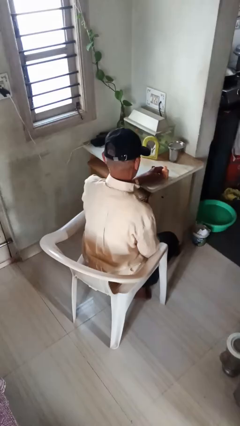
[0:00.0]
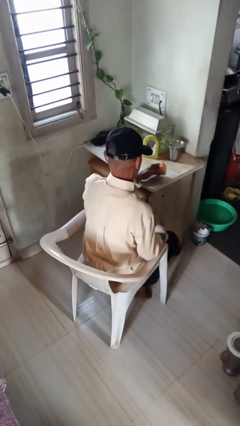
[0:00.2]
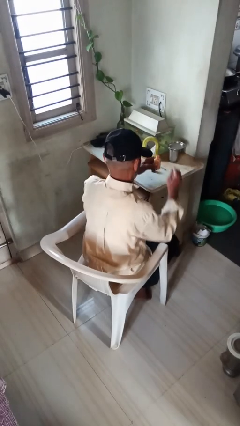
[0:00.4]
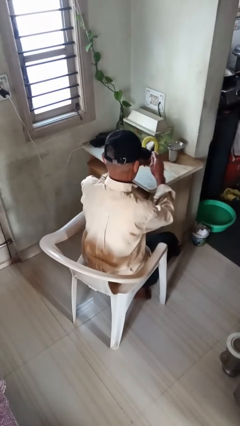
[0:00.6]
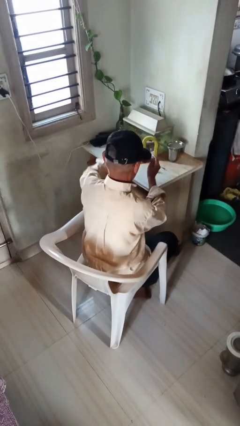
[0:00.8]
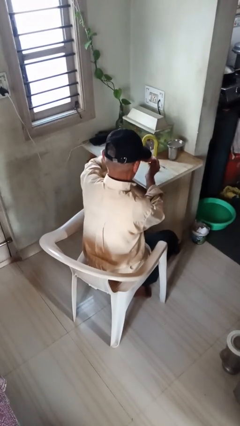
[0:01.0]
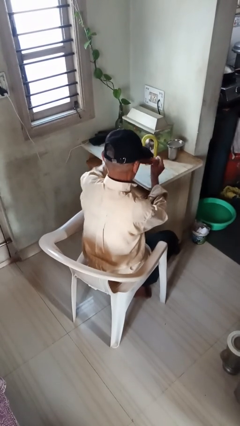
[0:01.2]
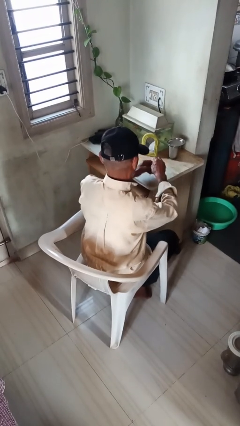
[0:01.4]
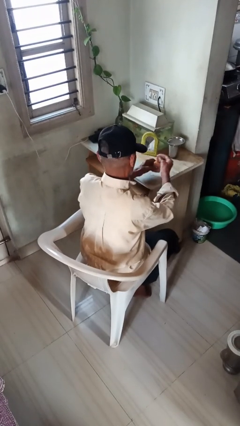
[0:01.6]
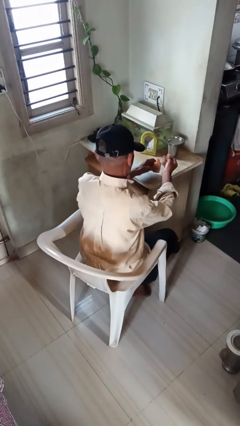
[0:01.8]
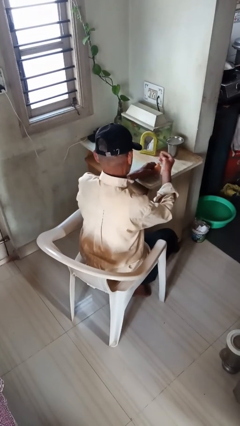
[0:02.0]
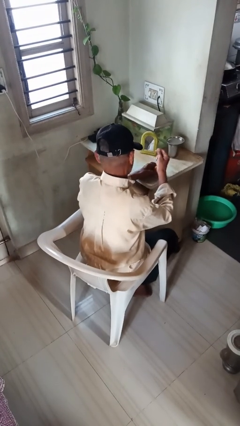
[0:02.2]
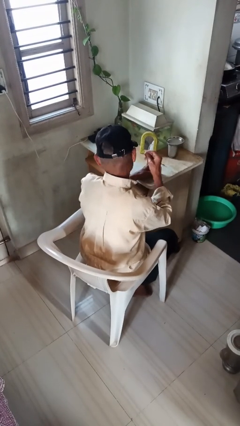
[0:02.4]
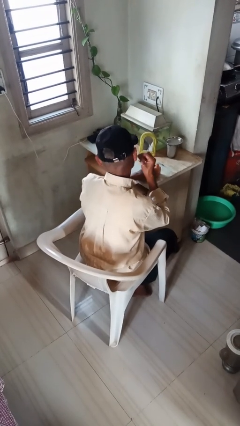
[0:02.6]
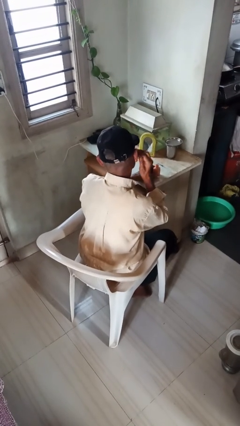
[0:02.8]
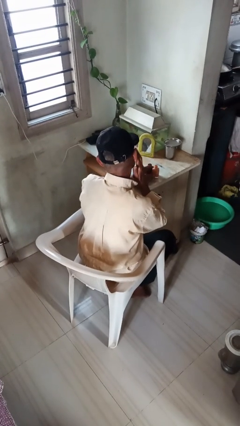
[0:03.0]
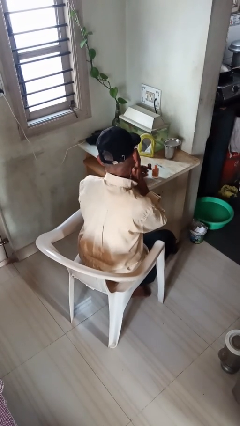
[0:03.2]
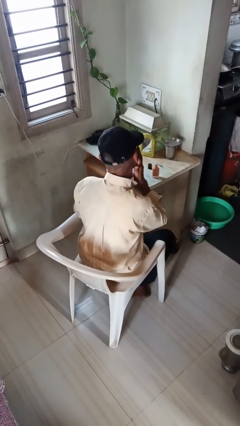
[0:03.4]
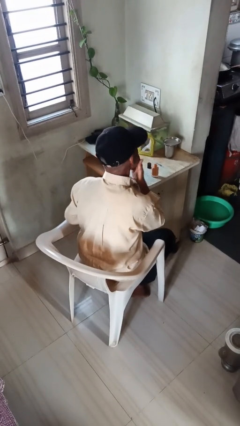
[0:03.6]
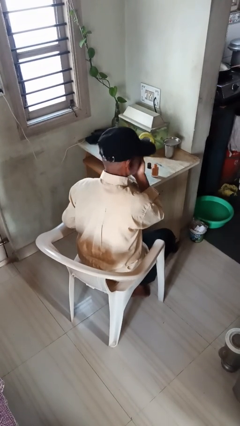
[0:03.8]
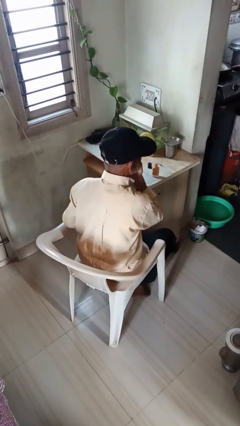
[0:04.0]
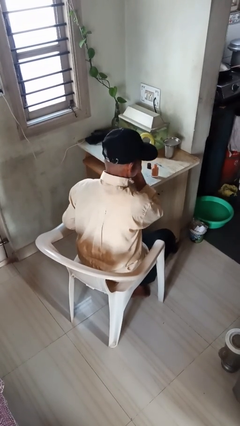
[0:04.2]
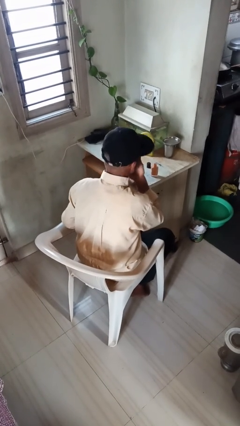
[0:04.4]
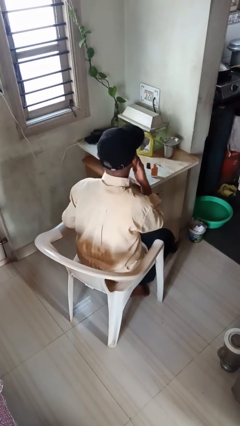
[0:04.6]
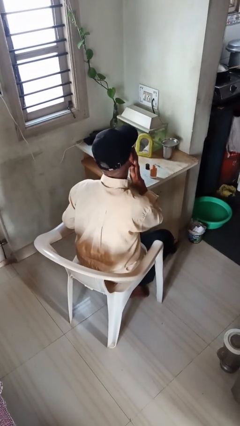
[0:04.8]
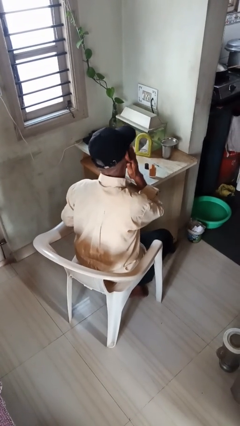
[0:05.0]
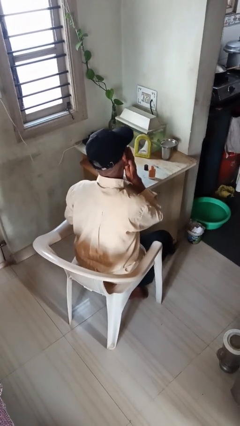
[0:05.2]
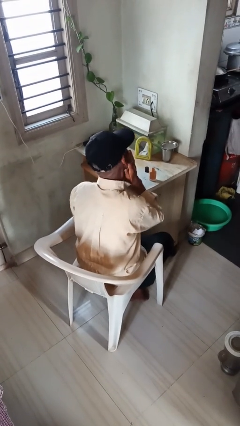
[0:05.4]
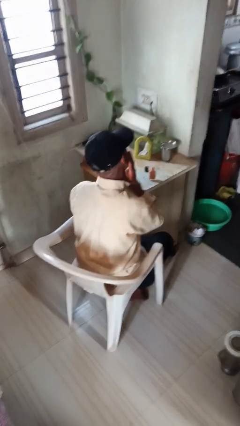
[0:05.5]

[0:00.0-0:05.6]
person applies foundation makeup

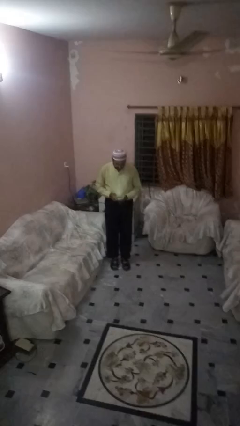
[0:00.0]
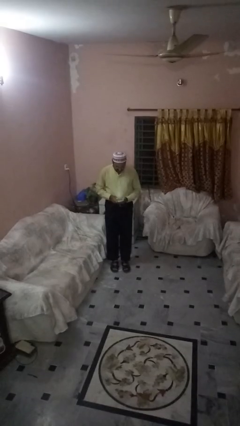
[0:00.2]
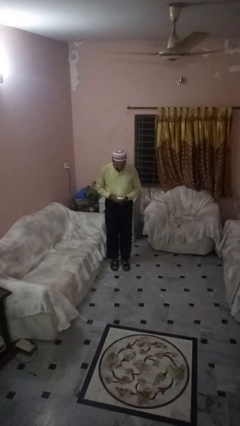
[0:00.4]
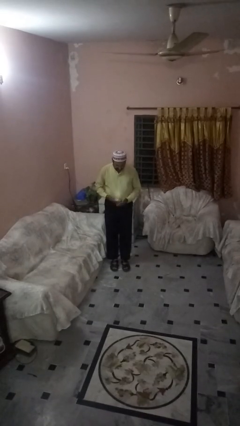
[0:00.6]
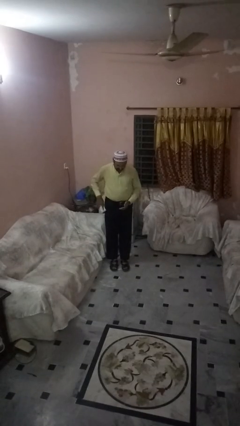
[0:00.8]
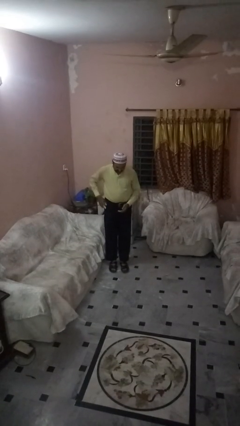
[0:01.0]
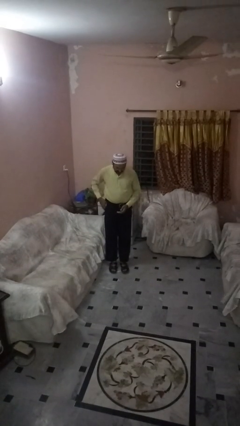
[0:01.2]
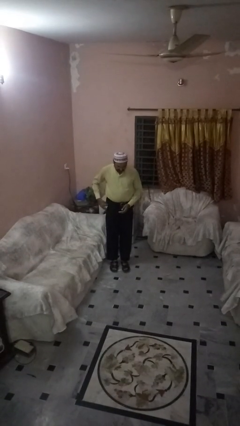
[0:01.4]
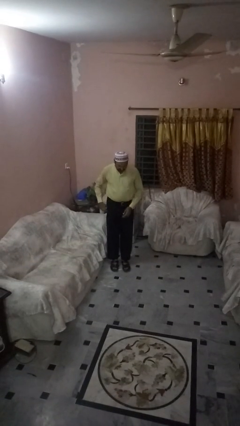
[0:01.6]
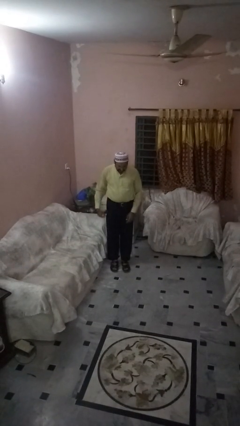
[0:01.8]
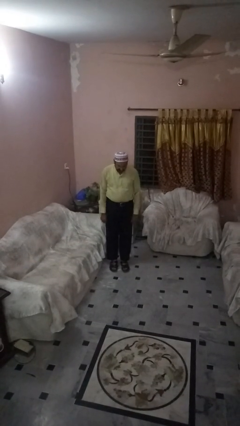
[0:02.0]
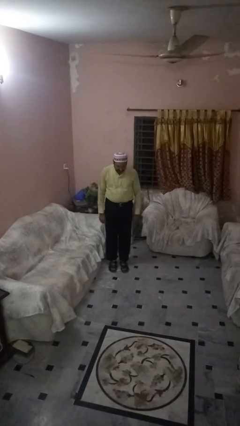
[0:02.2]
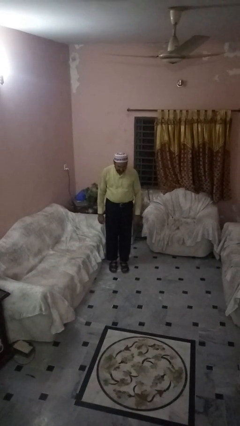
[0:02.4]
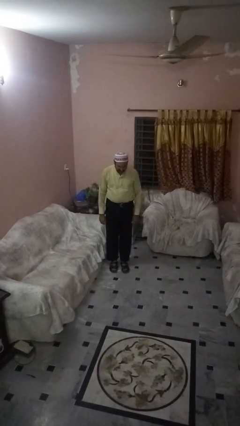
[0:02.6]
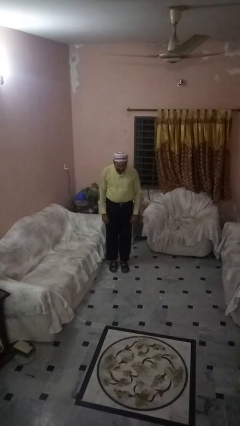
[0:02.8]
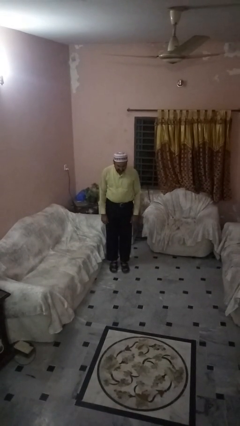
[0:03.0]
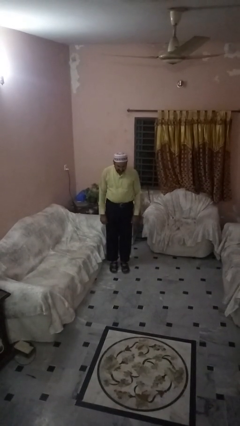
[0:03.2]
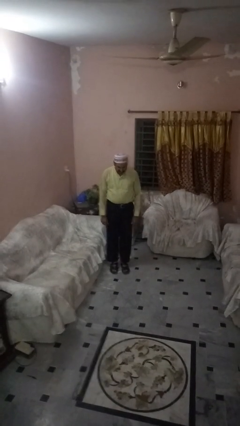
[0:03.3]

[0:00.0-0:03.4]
person puts phone into pocket

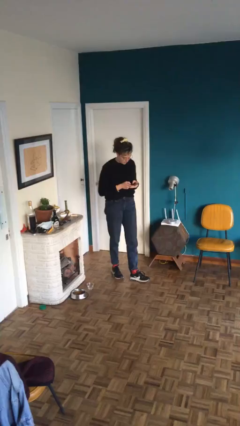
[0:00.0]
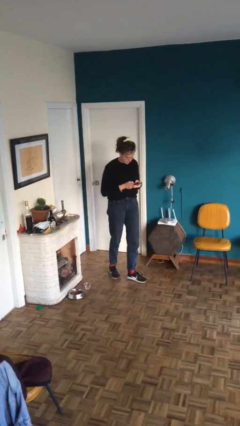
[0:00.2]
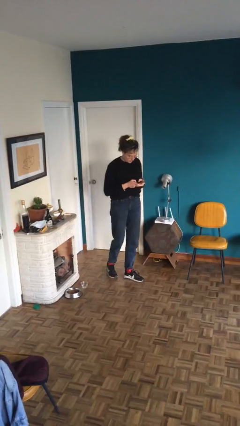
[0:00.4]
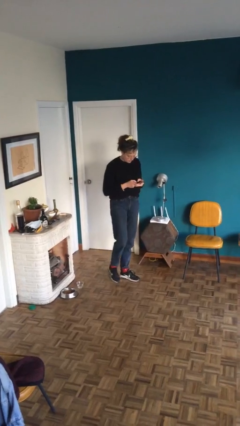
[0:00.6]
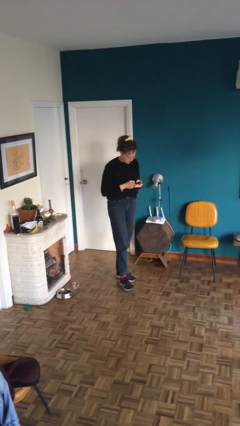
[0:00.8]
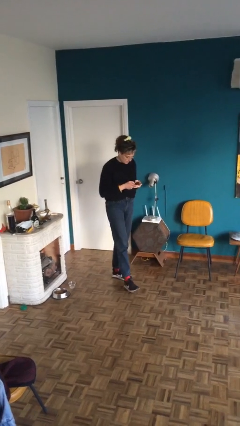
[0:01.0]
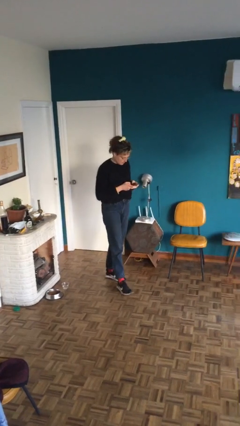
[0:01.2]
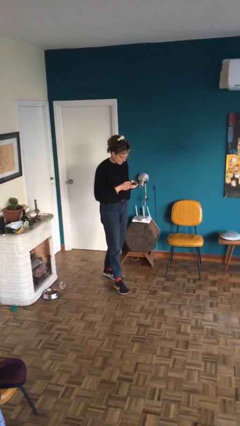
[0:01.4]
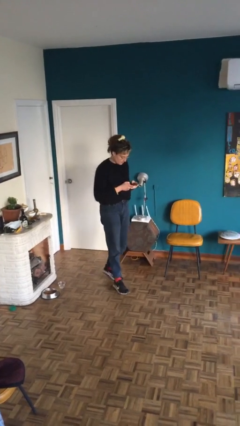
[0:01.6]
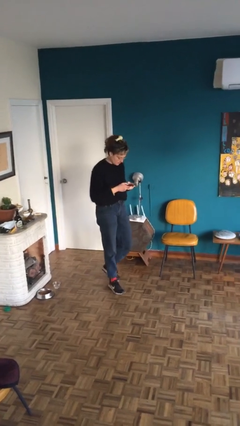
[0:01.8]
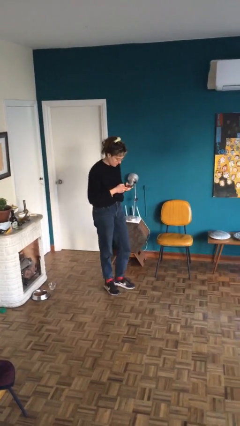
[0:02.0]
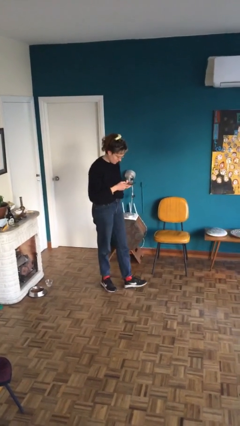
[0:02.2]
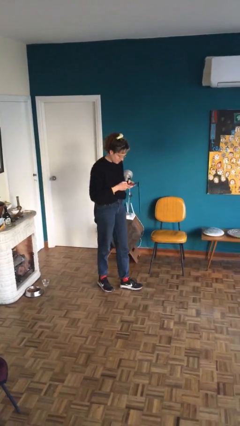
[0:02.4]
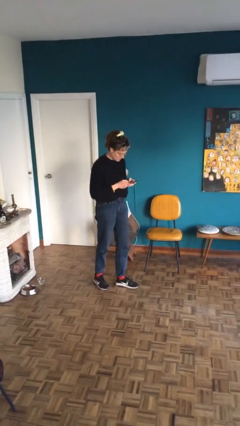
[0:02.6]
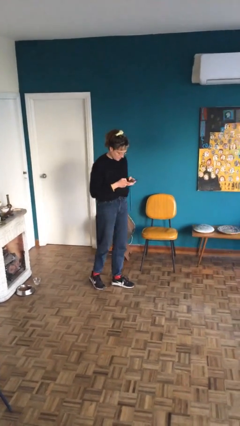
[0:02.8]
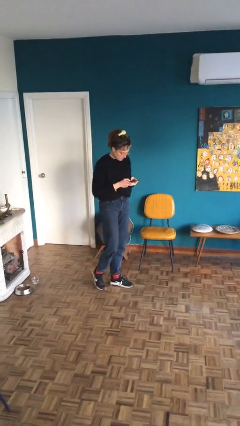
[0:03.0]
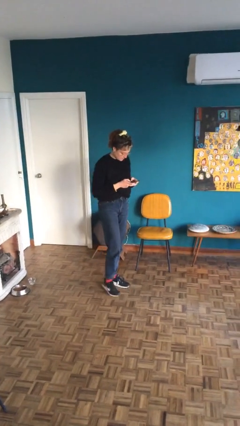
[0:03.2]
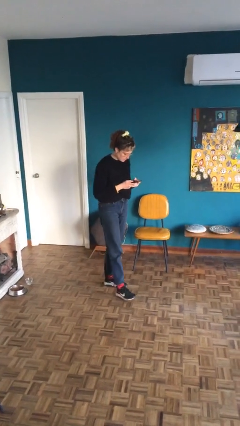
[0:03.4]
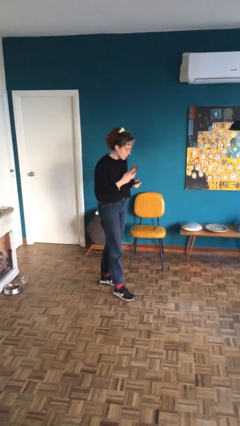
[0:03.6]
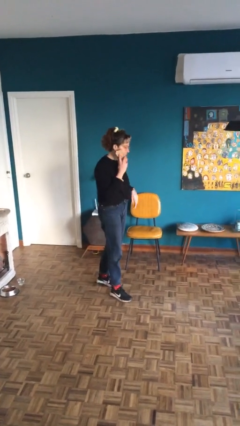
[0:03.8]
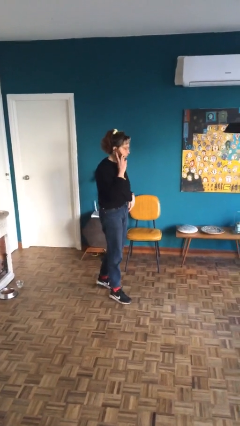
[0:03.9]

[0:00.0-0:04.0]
person texts on phone

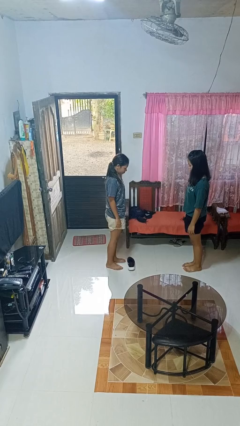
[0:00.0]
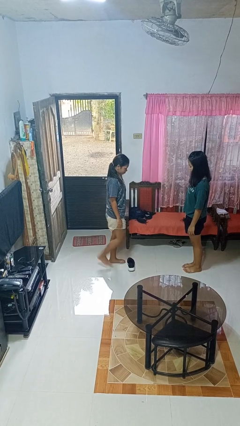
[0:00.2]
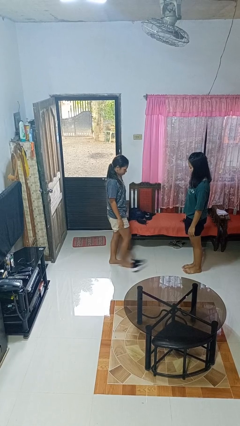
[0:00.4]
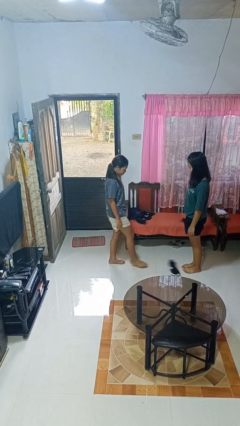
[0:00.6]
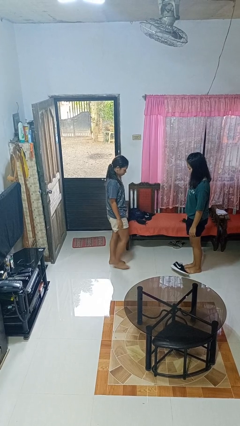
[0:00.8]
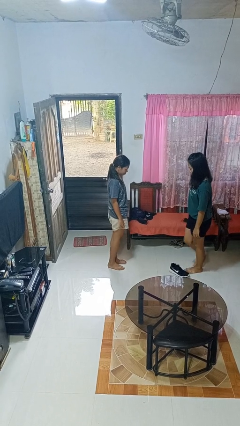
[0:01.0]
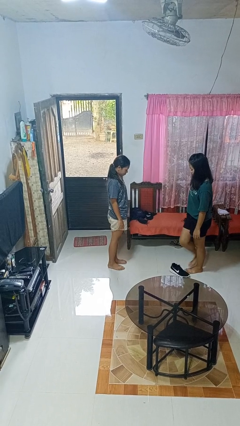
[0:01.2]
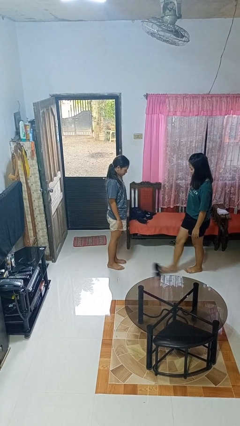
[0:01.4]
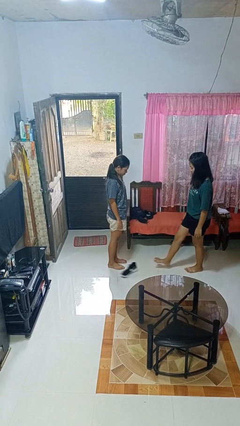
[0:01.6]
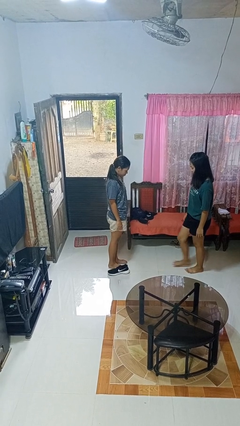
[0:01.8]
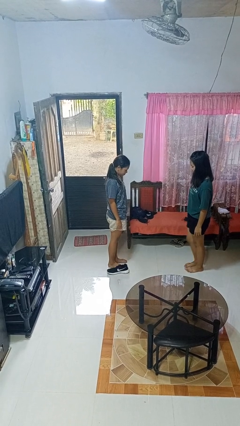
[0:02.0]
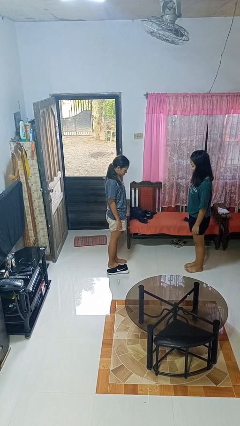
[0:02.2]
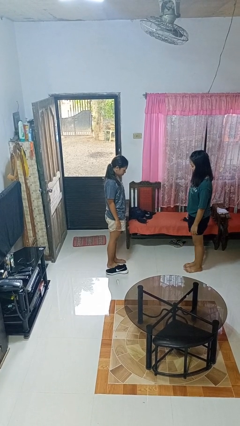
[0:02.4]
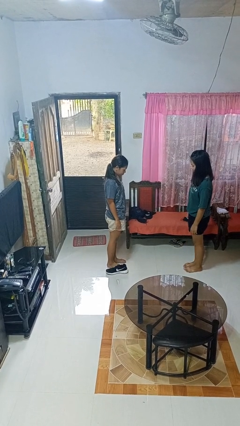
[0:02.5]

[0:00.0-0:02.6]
person kicks object to person

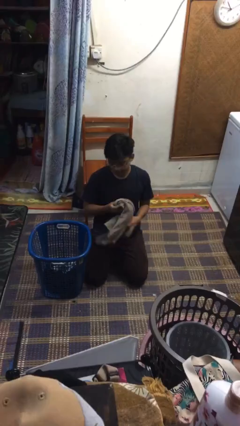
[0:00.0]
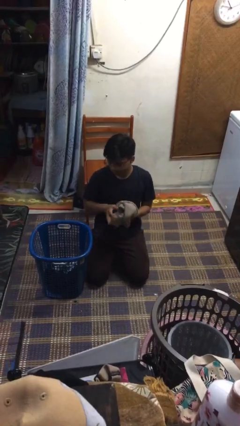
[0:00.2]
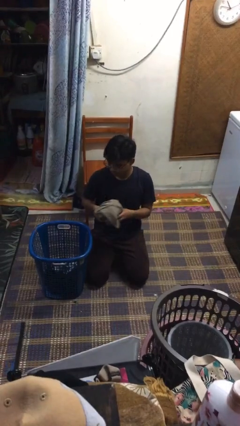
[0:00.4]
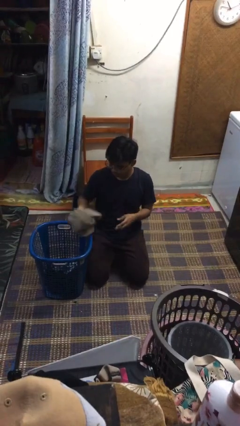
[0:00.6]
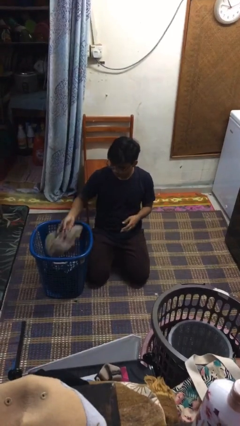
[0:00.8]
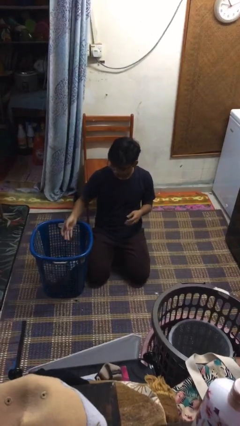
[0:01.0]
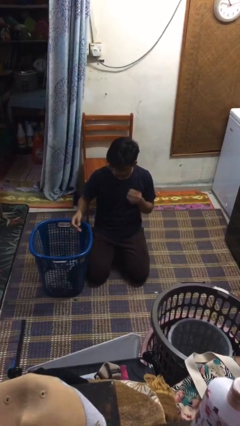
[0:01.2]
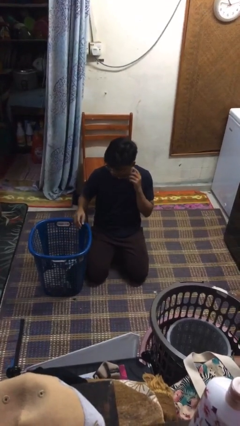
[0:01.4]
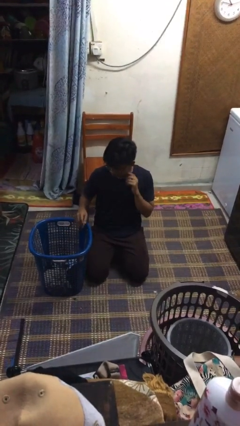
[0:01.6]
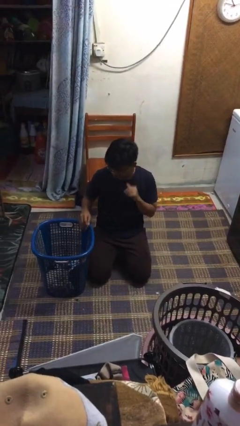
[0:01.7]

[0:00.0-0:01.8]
person puts object into basket
